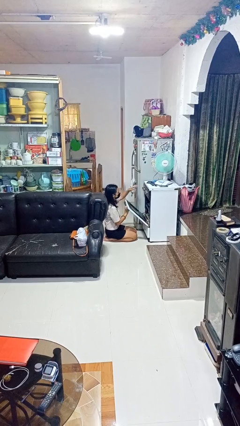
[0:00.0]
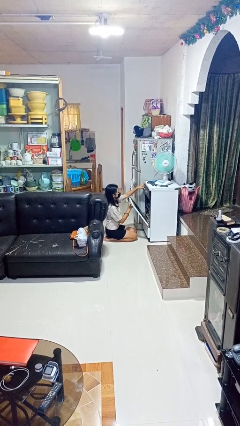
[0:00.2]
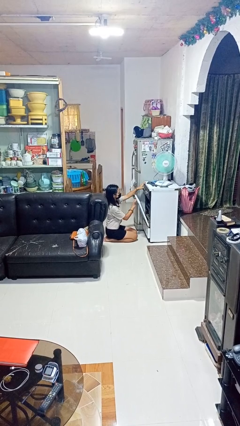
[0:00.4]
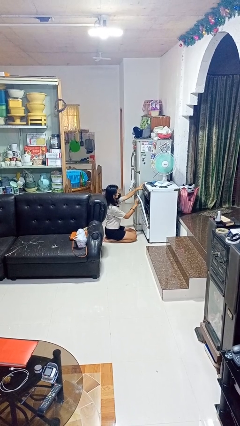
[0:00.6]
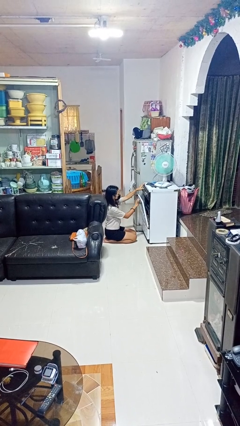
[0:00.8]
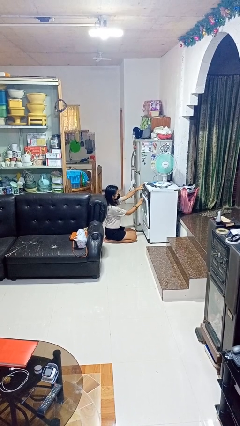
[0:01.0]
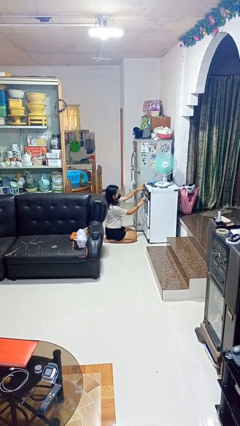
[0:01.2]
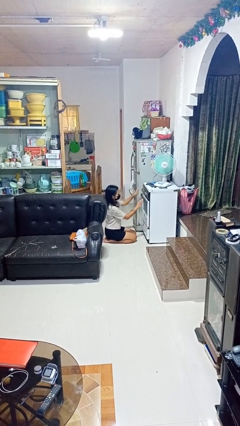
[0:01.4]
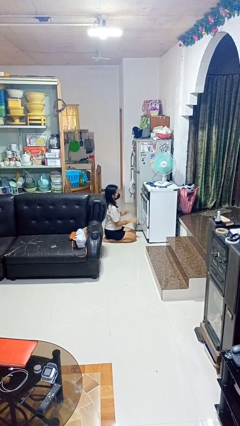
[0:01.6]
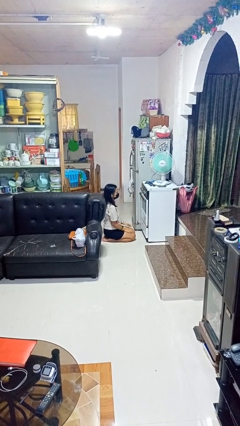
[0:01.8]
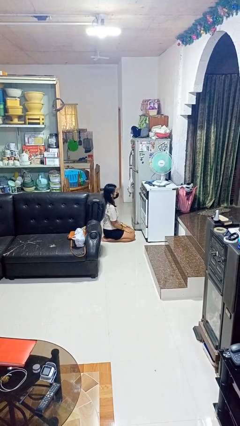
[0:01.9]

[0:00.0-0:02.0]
person closes oven door

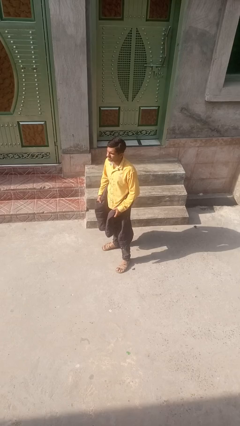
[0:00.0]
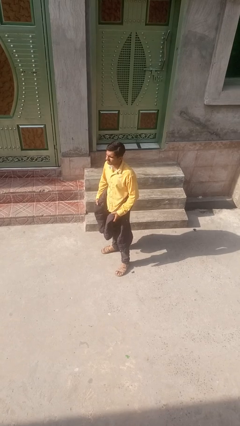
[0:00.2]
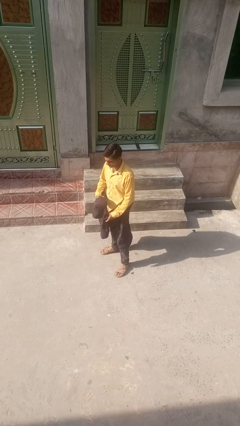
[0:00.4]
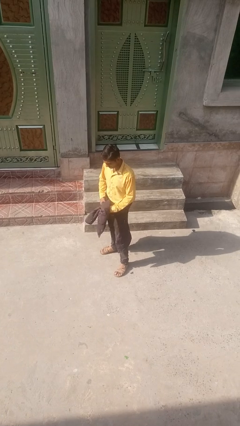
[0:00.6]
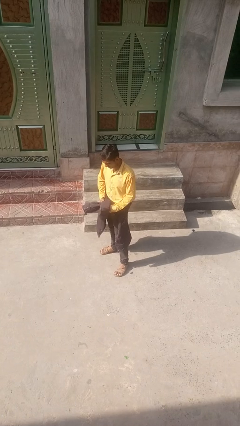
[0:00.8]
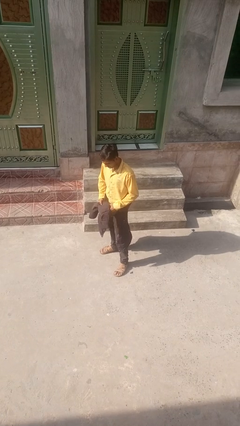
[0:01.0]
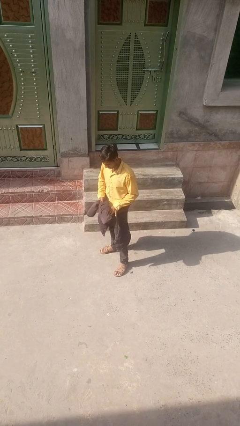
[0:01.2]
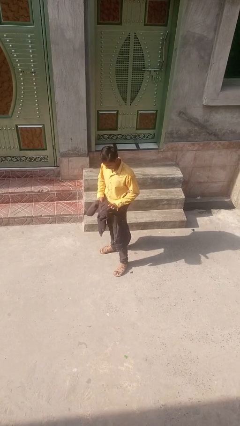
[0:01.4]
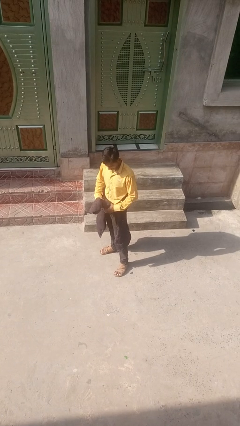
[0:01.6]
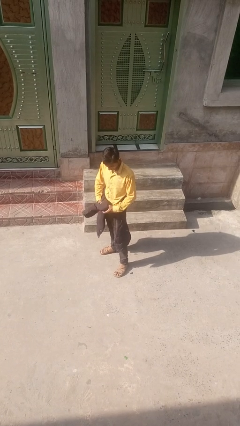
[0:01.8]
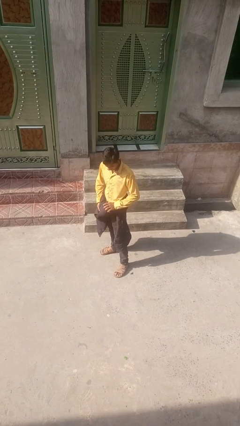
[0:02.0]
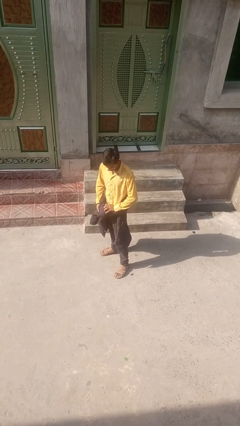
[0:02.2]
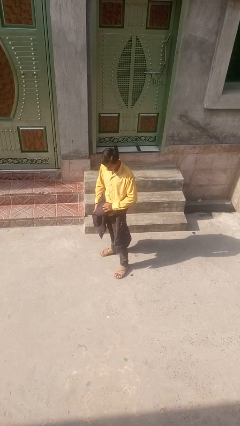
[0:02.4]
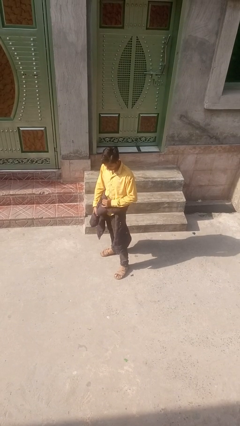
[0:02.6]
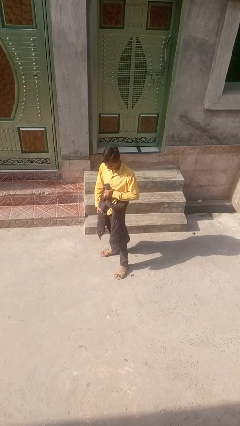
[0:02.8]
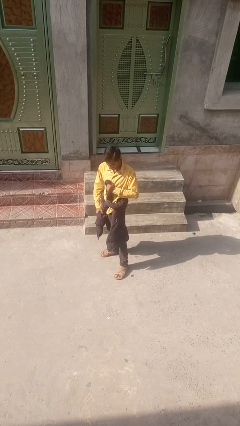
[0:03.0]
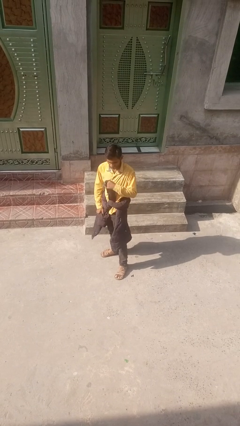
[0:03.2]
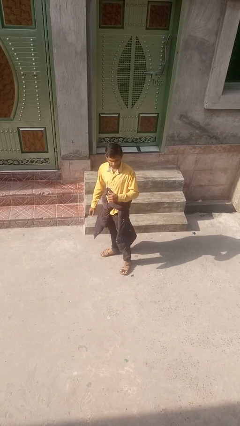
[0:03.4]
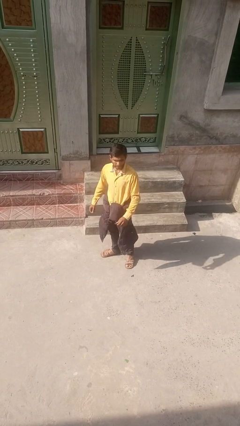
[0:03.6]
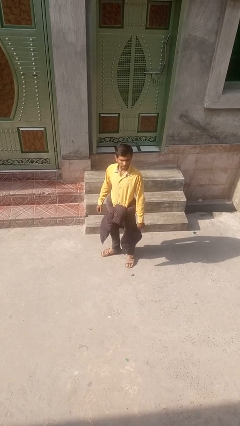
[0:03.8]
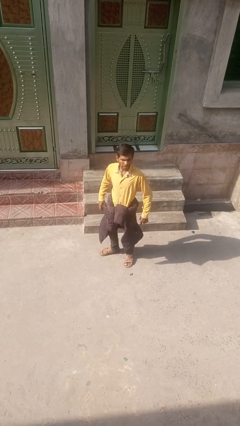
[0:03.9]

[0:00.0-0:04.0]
person ties jacket around waist

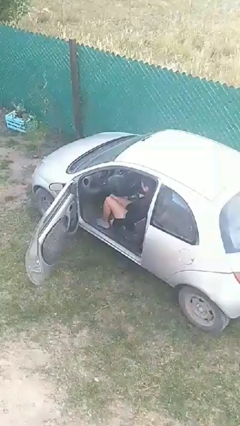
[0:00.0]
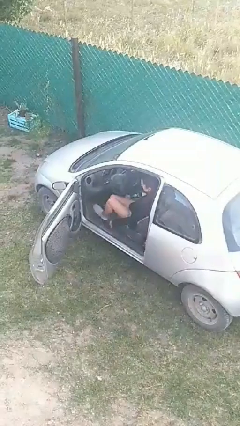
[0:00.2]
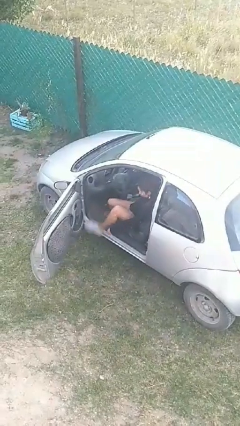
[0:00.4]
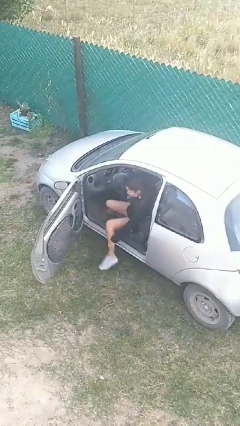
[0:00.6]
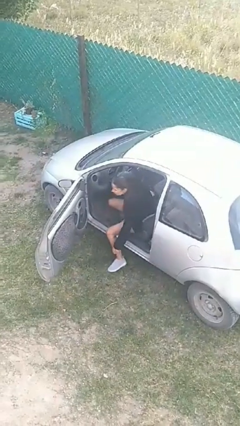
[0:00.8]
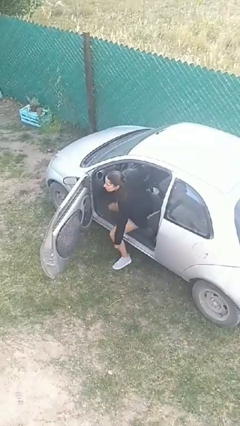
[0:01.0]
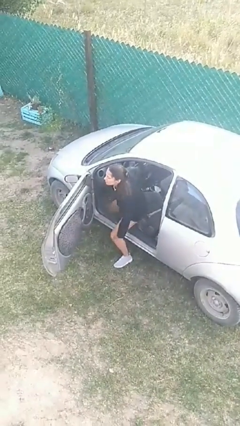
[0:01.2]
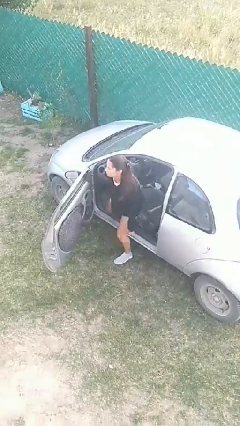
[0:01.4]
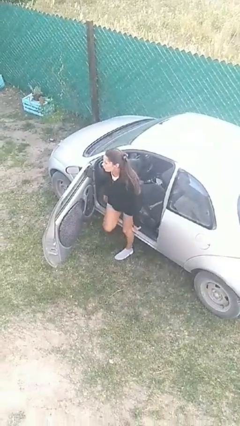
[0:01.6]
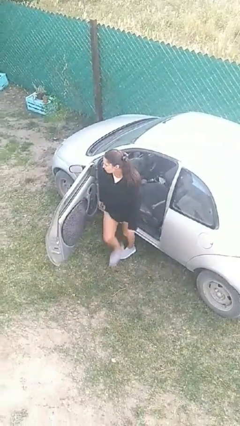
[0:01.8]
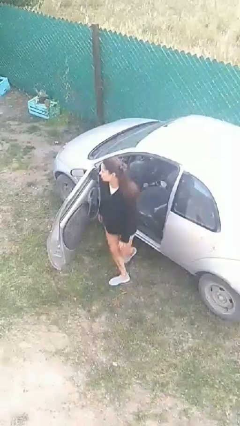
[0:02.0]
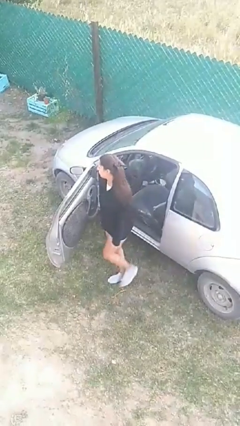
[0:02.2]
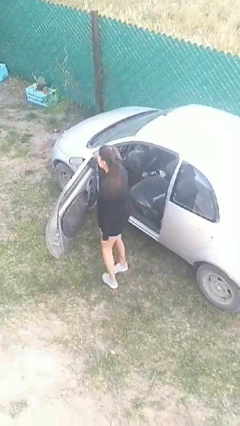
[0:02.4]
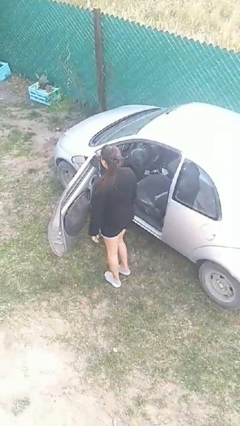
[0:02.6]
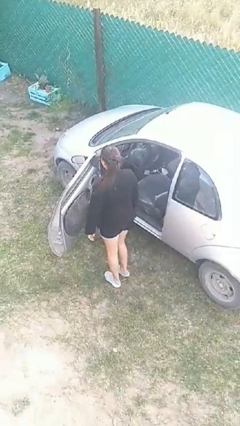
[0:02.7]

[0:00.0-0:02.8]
person exits car

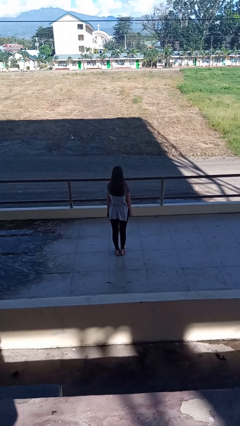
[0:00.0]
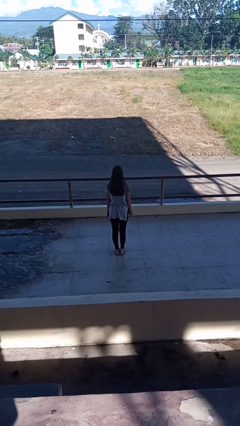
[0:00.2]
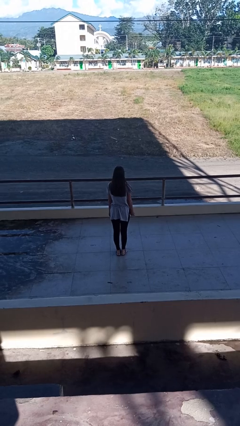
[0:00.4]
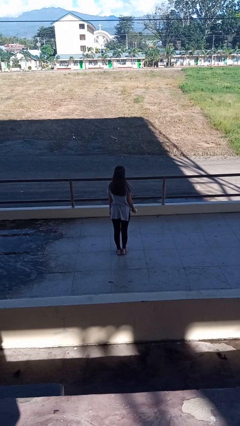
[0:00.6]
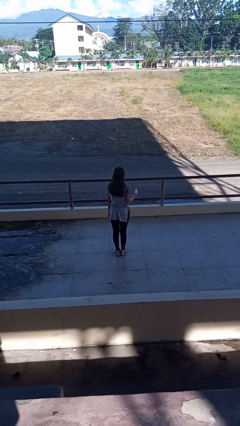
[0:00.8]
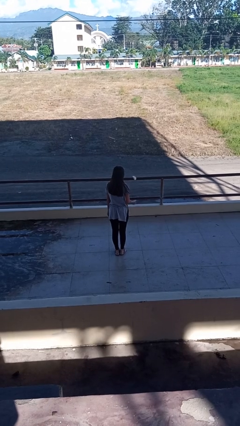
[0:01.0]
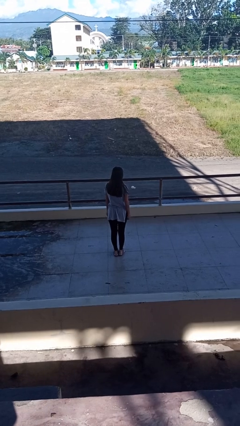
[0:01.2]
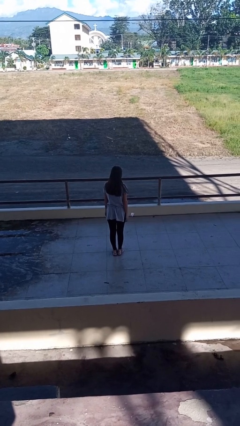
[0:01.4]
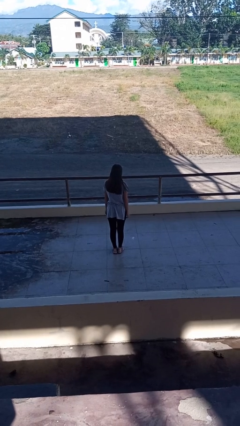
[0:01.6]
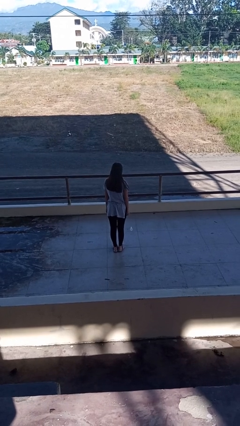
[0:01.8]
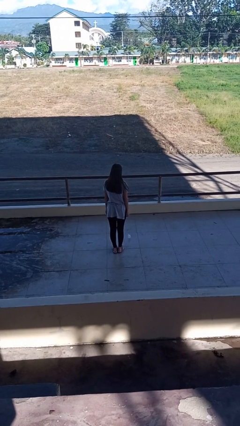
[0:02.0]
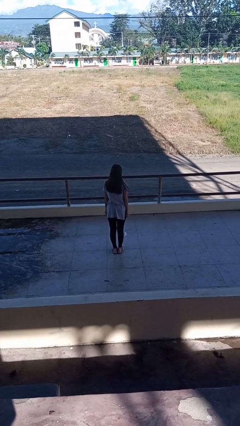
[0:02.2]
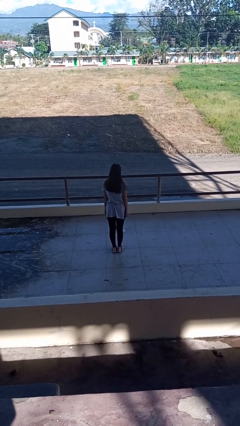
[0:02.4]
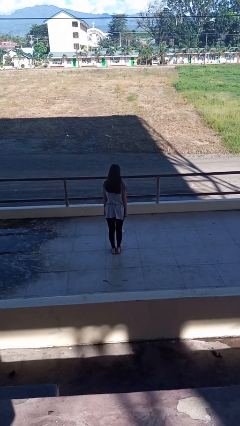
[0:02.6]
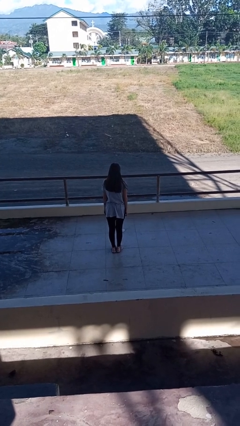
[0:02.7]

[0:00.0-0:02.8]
person throws object into air

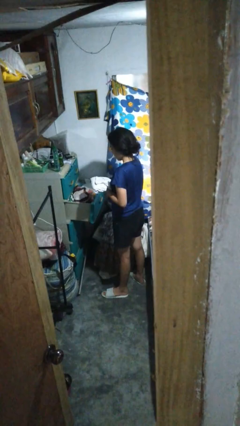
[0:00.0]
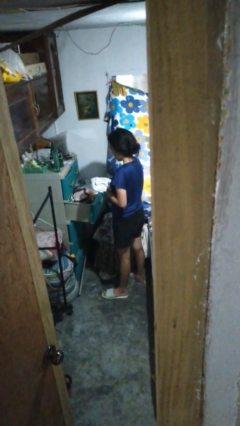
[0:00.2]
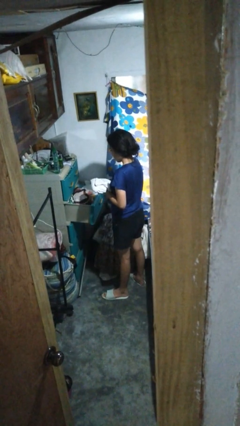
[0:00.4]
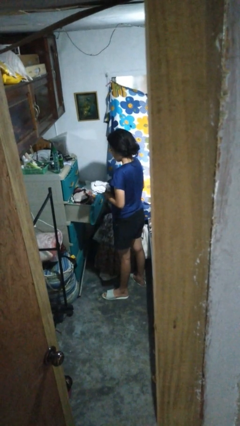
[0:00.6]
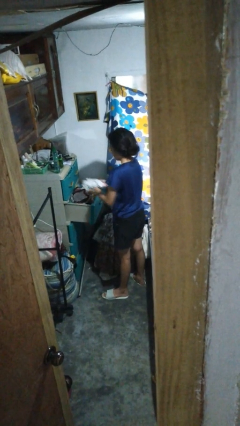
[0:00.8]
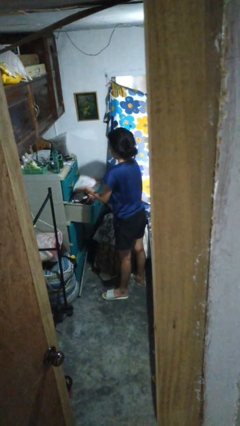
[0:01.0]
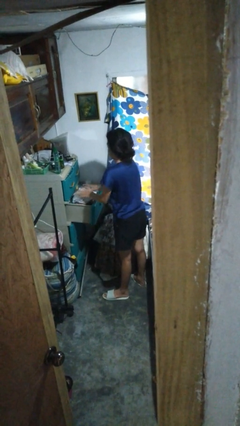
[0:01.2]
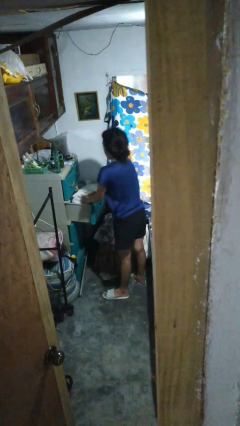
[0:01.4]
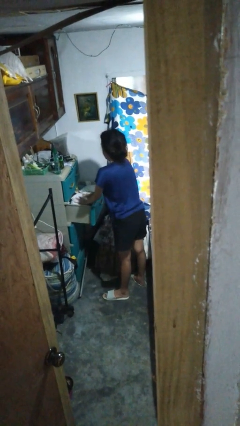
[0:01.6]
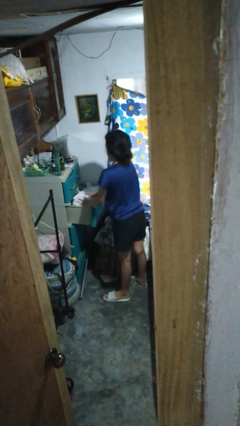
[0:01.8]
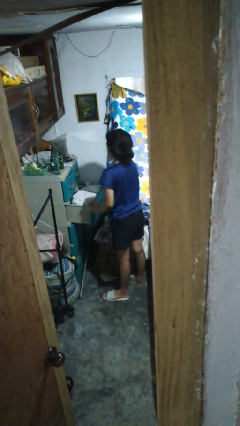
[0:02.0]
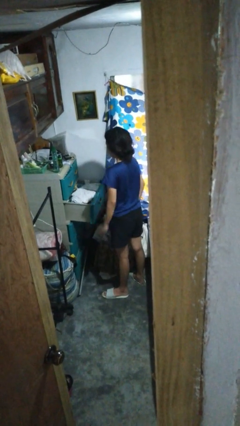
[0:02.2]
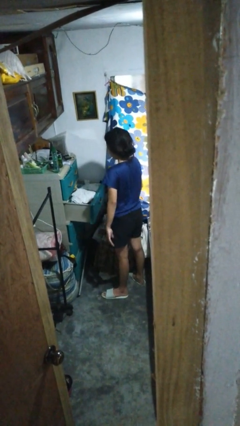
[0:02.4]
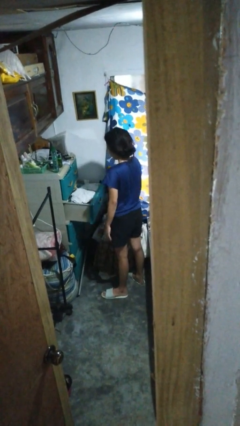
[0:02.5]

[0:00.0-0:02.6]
person puts clothes into dresser

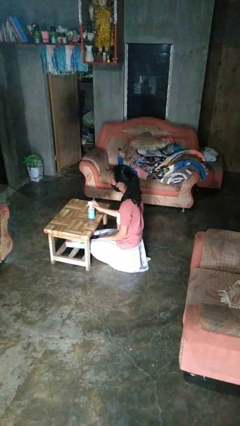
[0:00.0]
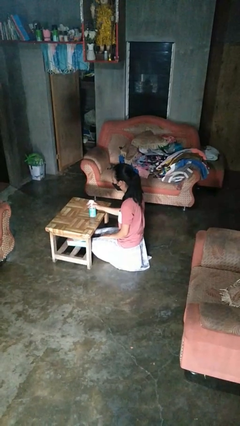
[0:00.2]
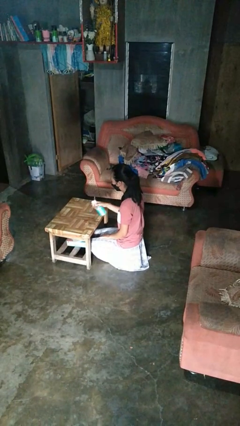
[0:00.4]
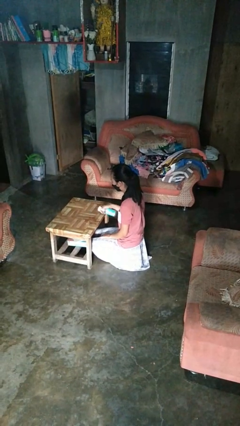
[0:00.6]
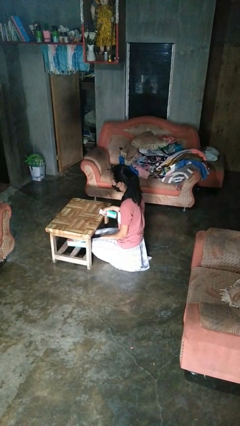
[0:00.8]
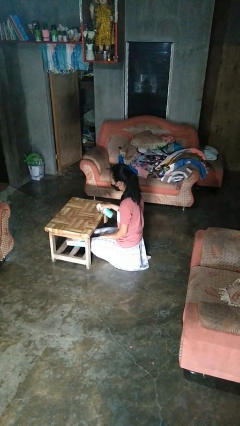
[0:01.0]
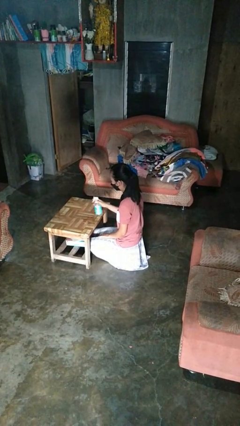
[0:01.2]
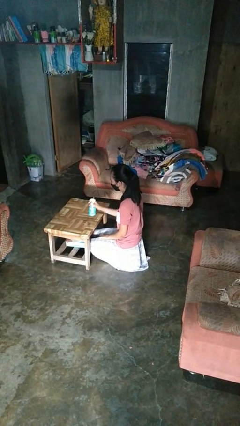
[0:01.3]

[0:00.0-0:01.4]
person sprays from bottle

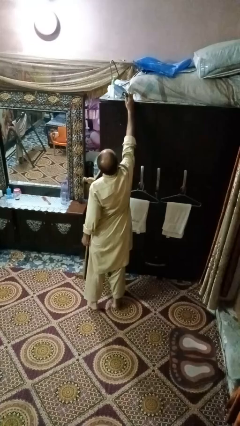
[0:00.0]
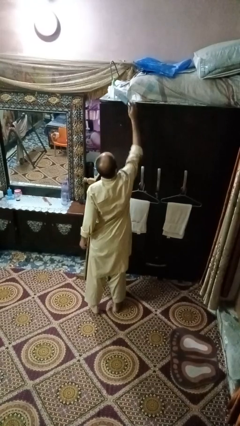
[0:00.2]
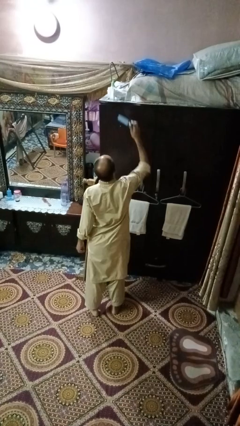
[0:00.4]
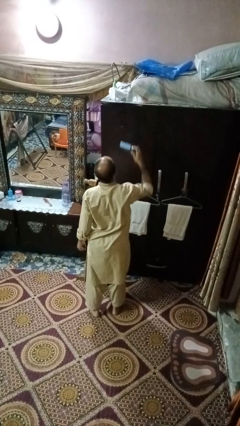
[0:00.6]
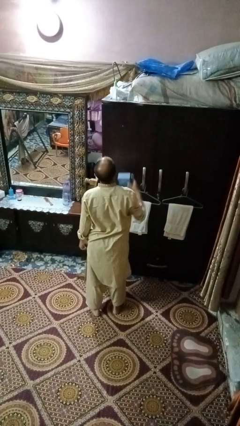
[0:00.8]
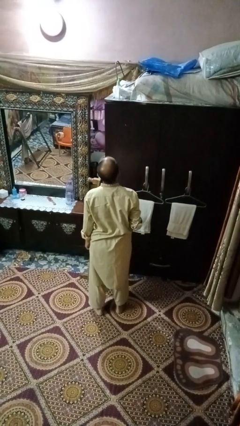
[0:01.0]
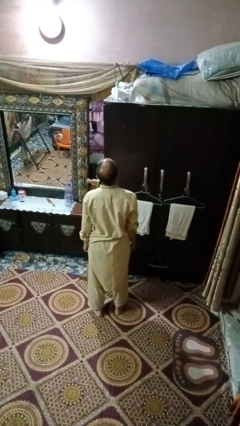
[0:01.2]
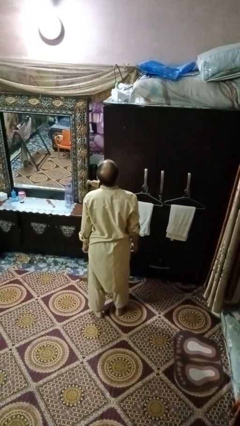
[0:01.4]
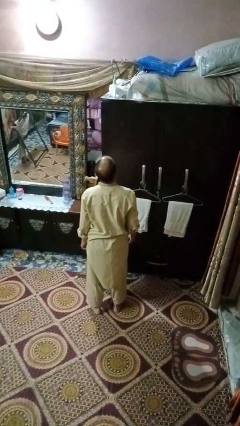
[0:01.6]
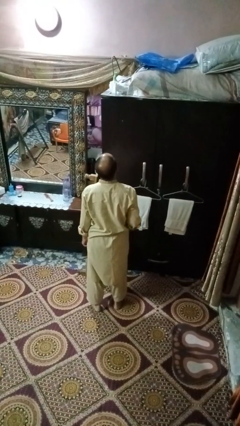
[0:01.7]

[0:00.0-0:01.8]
person puts down object on countertop
